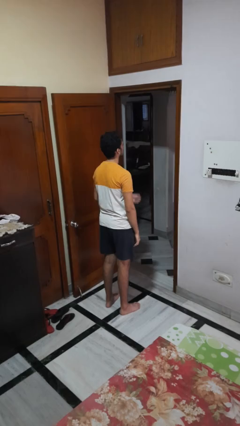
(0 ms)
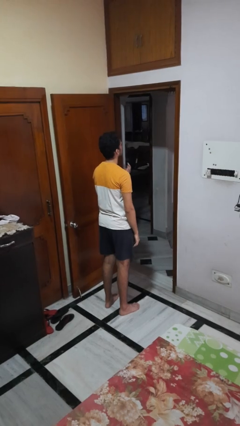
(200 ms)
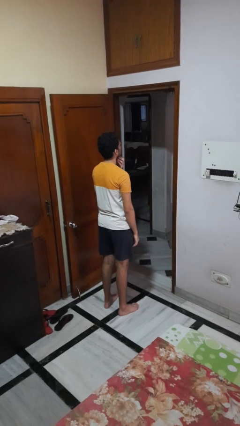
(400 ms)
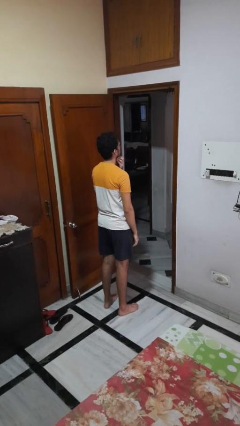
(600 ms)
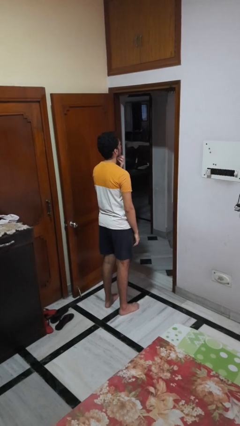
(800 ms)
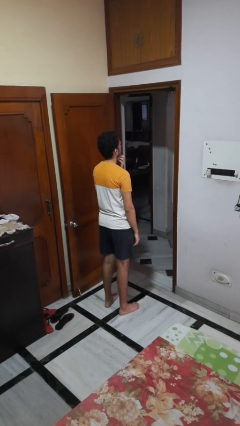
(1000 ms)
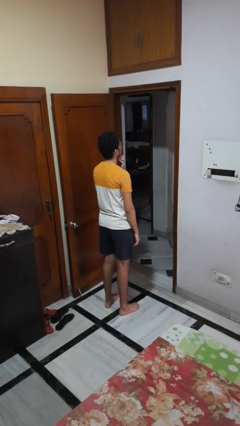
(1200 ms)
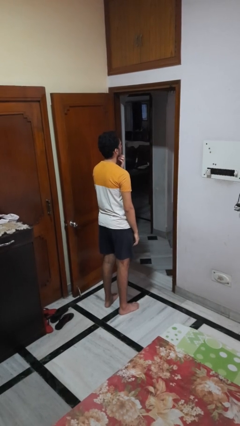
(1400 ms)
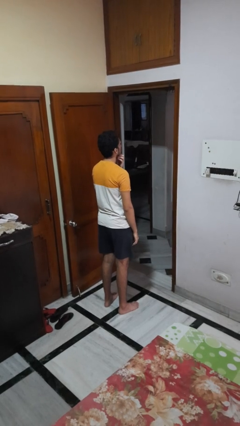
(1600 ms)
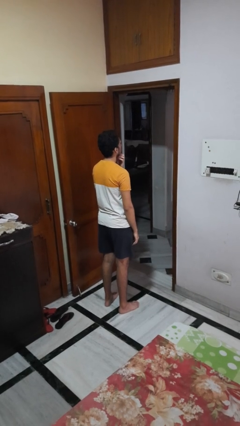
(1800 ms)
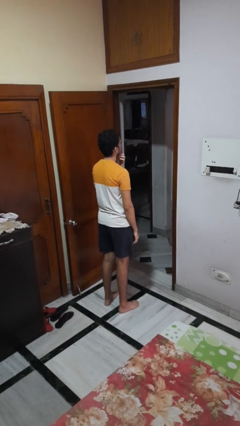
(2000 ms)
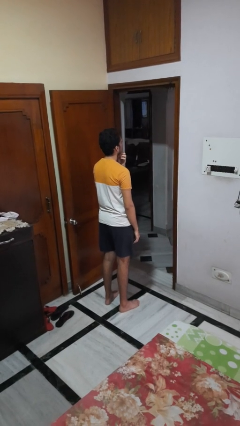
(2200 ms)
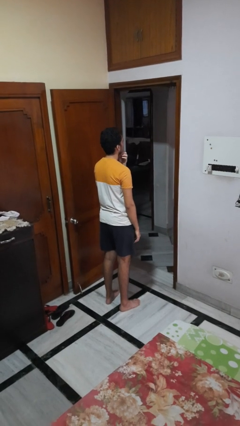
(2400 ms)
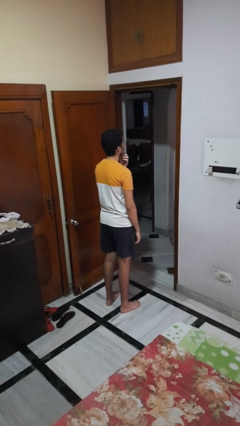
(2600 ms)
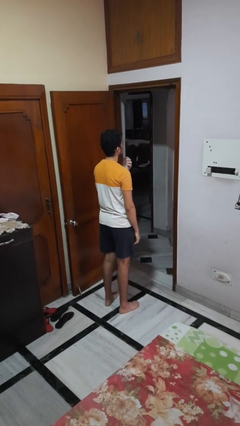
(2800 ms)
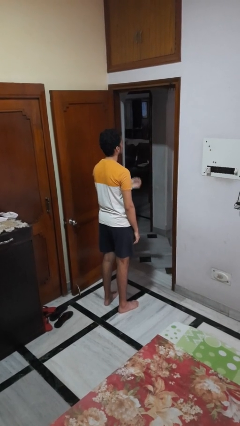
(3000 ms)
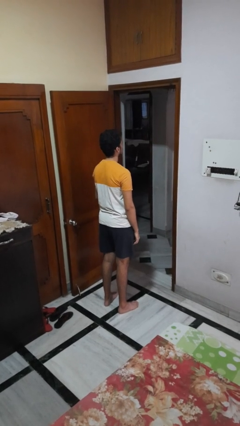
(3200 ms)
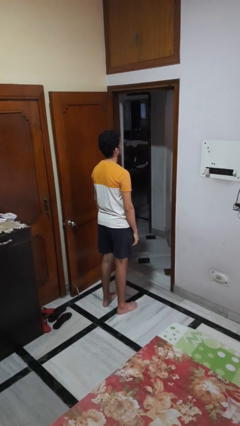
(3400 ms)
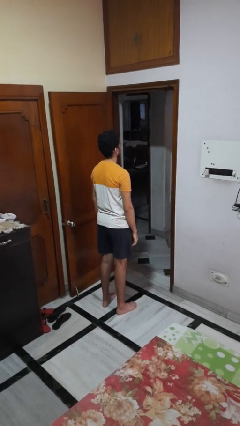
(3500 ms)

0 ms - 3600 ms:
person strokes chin

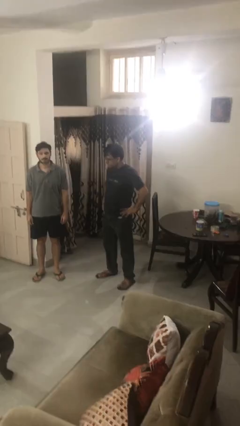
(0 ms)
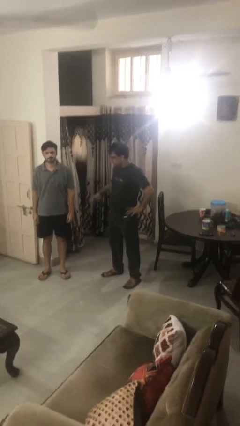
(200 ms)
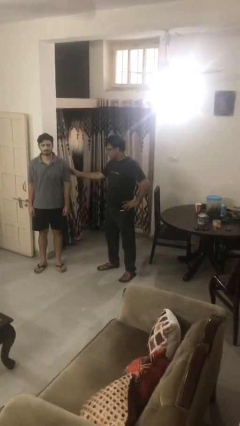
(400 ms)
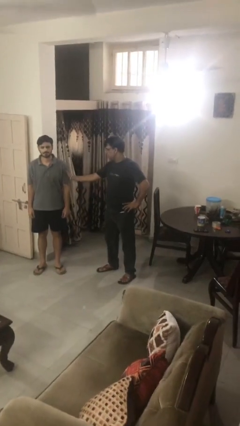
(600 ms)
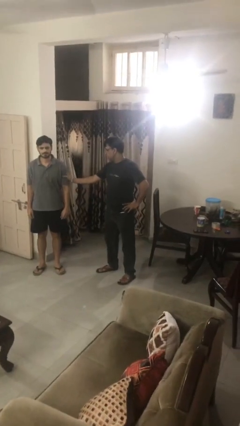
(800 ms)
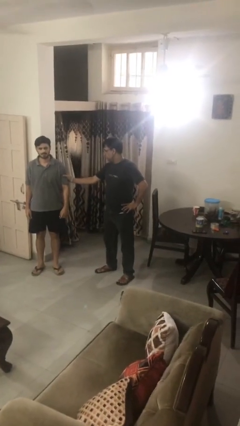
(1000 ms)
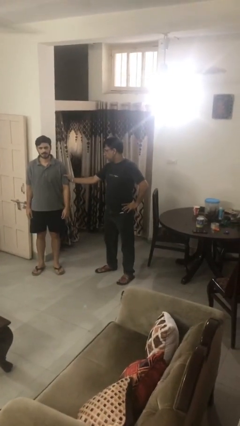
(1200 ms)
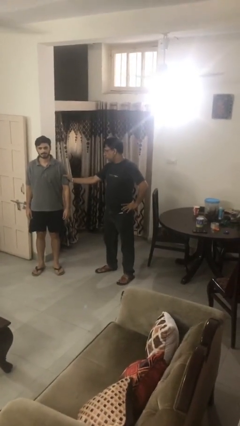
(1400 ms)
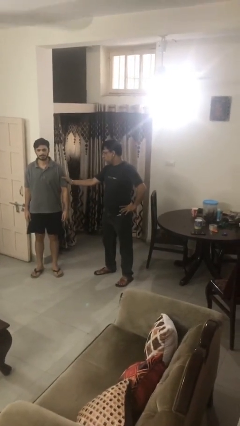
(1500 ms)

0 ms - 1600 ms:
person grabs person by bicep

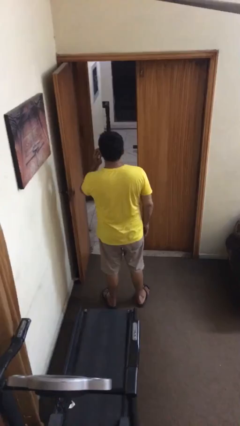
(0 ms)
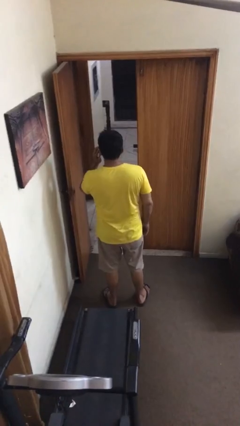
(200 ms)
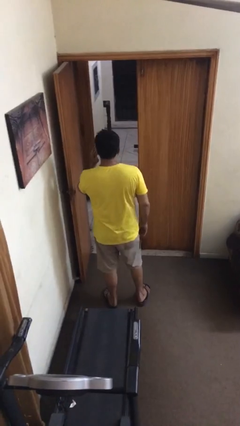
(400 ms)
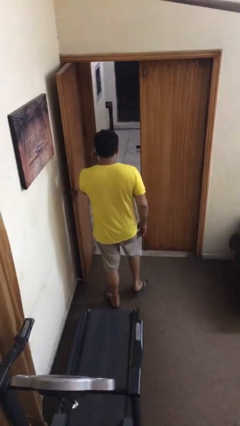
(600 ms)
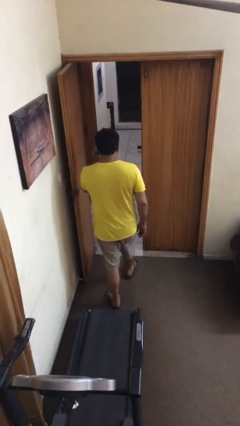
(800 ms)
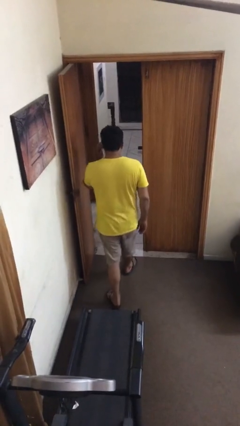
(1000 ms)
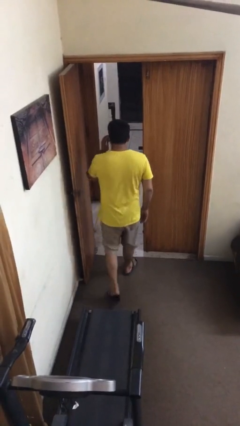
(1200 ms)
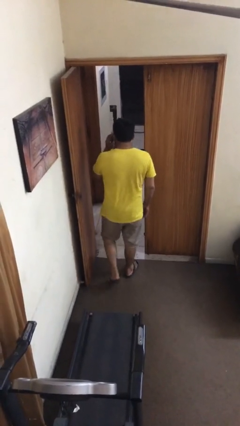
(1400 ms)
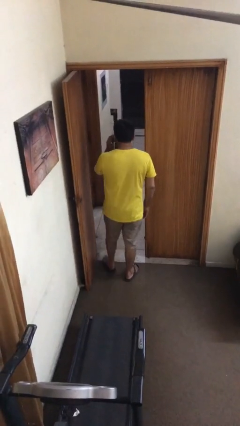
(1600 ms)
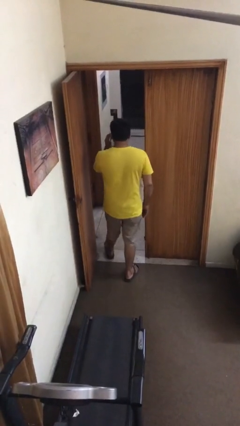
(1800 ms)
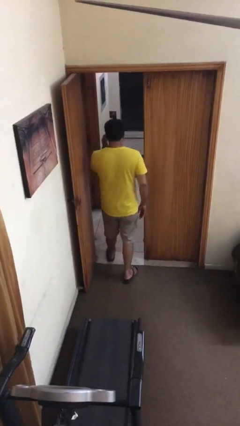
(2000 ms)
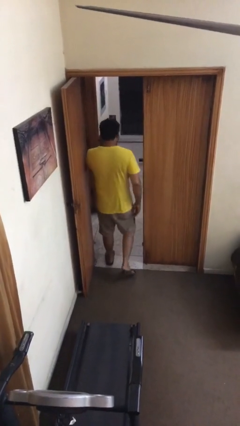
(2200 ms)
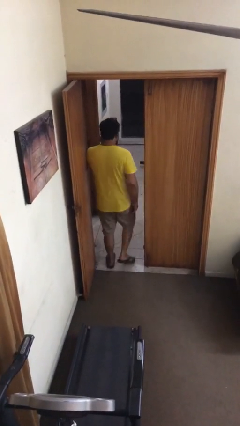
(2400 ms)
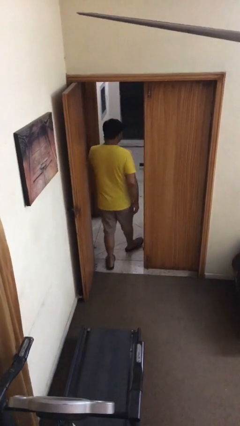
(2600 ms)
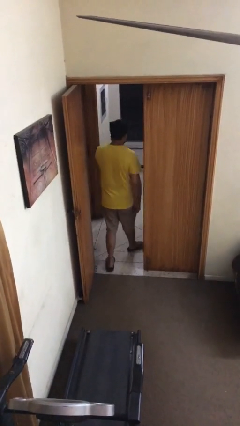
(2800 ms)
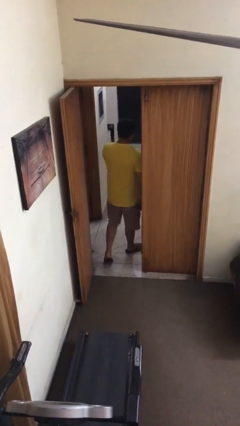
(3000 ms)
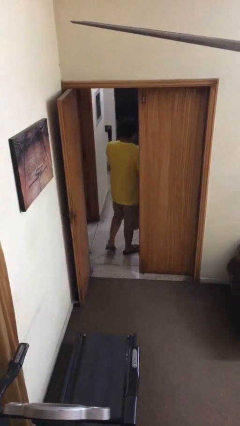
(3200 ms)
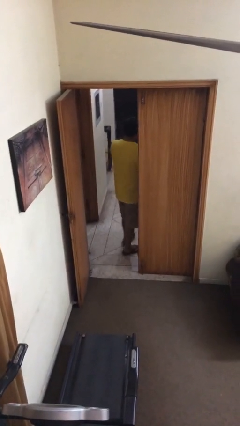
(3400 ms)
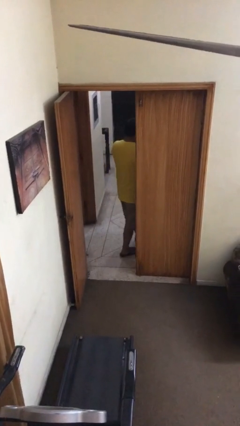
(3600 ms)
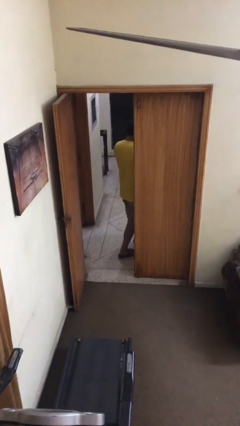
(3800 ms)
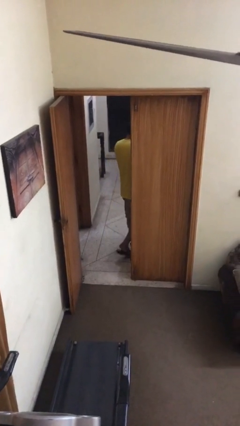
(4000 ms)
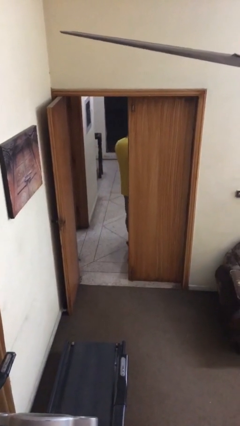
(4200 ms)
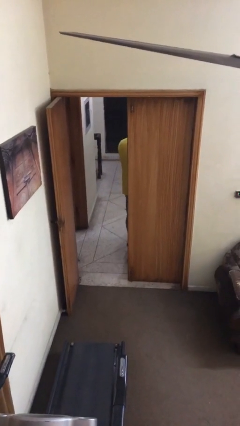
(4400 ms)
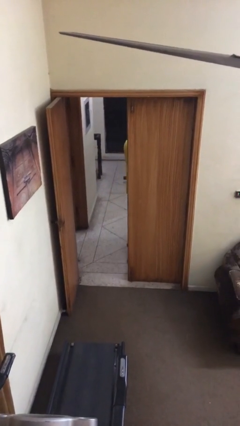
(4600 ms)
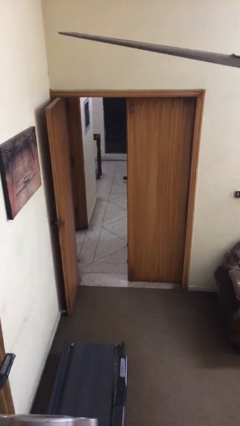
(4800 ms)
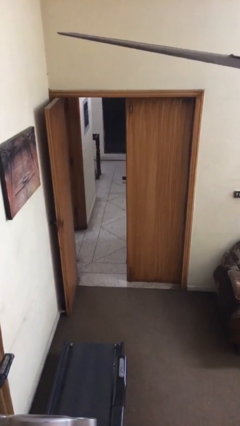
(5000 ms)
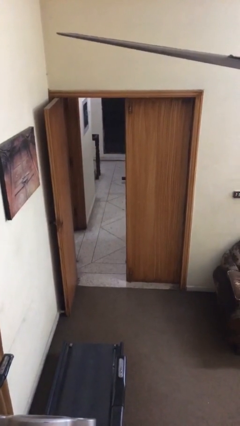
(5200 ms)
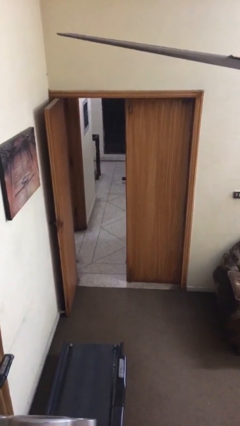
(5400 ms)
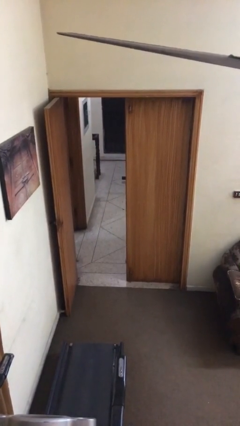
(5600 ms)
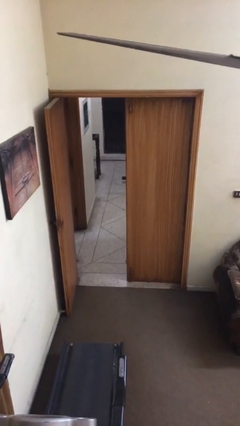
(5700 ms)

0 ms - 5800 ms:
person exits scene through structure

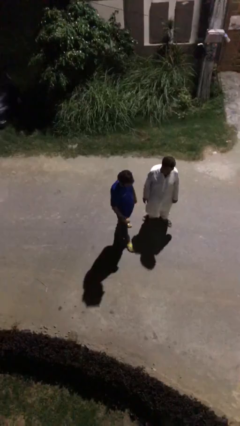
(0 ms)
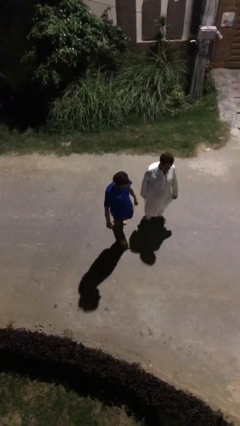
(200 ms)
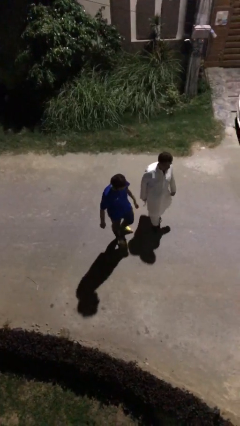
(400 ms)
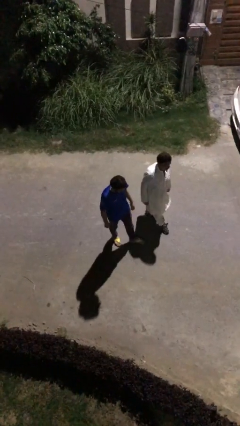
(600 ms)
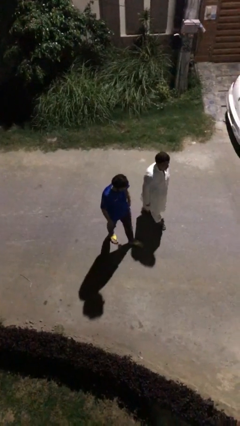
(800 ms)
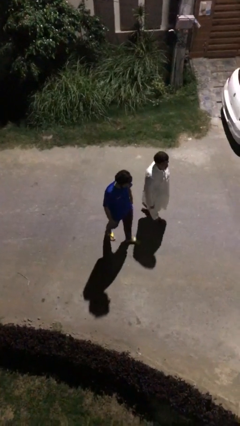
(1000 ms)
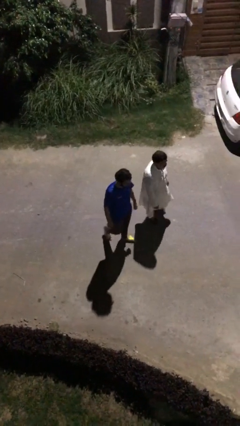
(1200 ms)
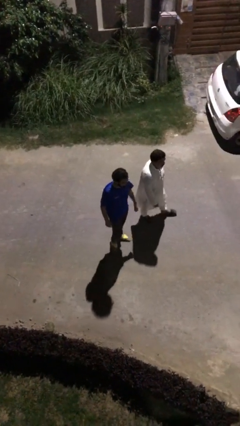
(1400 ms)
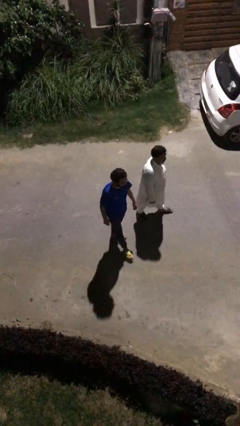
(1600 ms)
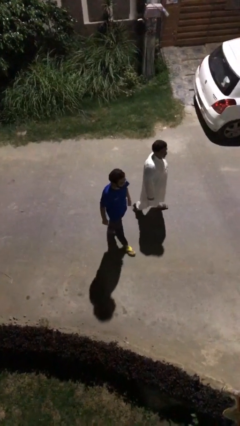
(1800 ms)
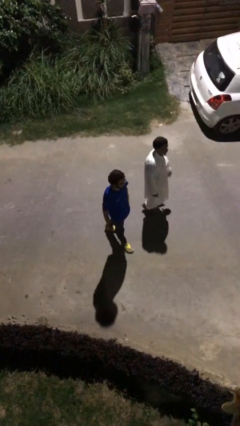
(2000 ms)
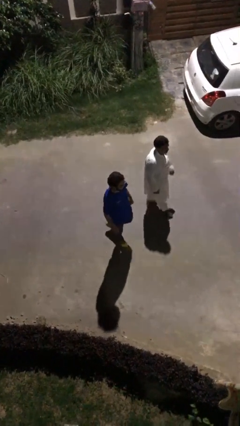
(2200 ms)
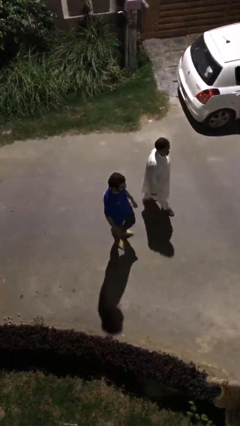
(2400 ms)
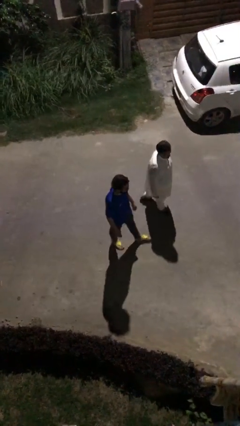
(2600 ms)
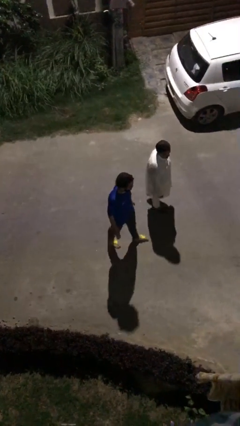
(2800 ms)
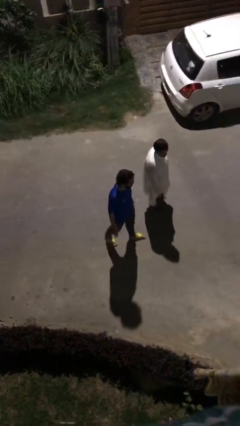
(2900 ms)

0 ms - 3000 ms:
person talks to person

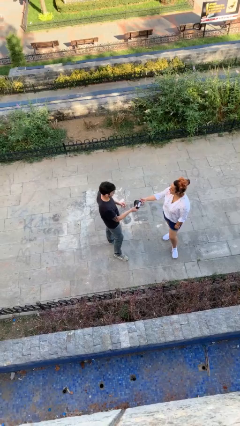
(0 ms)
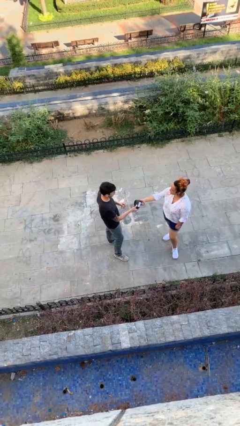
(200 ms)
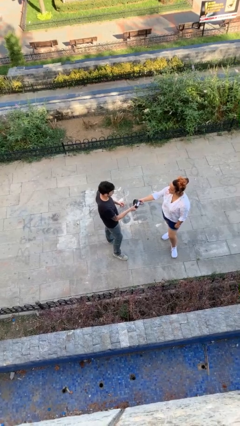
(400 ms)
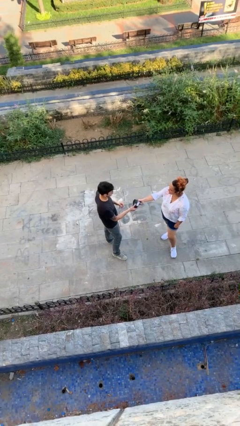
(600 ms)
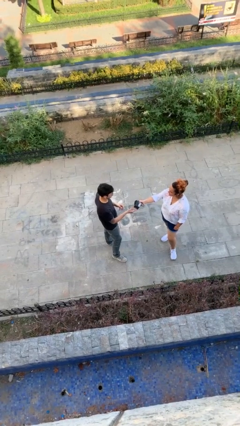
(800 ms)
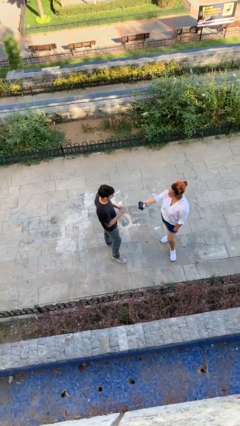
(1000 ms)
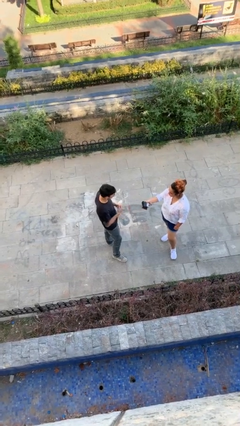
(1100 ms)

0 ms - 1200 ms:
person transfers object to person

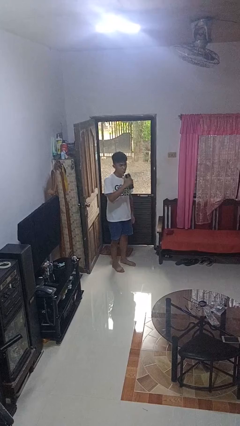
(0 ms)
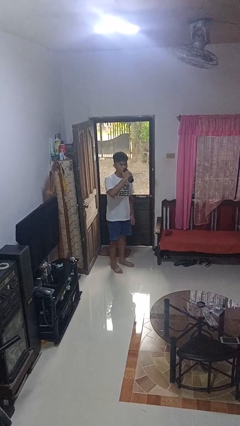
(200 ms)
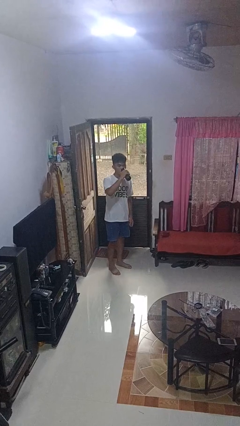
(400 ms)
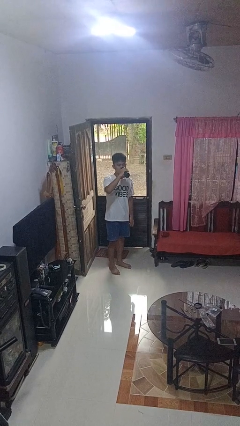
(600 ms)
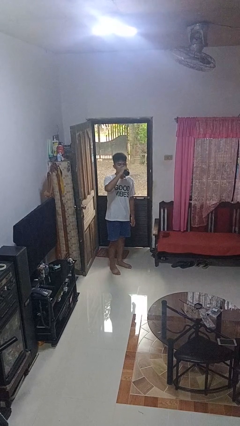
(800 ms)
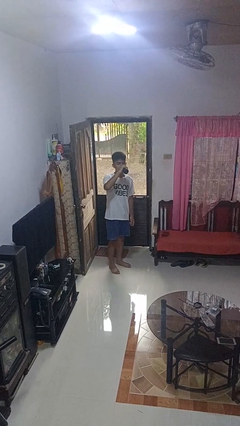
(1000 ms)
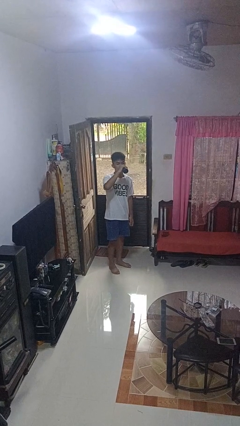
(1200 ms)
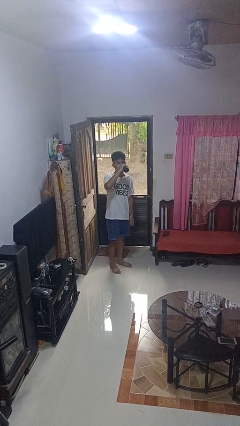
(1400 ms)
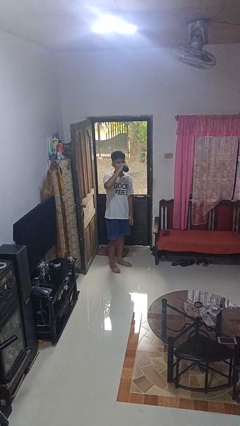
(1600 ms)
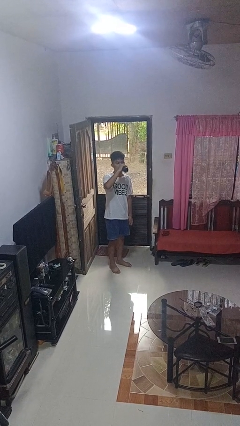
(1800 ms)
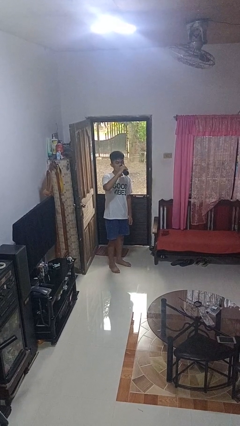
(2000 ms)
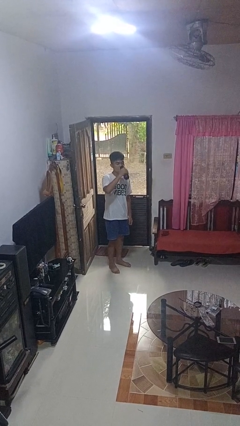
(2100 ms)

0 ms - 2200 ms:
person drinks from bottle
